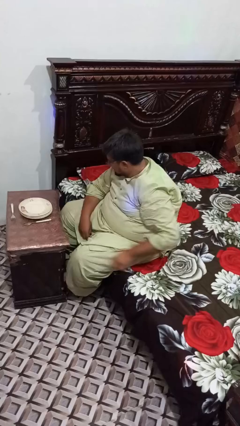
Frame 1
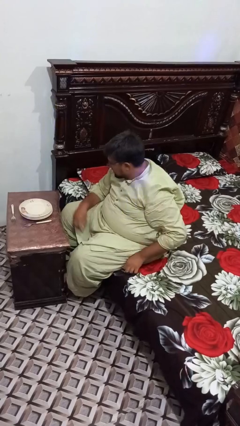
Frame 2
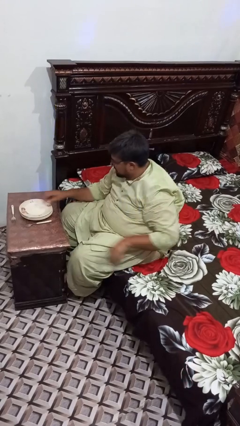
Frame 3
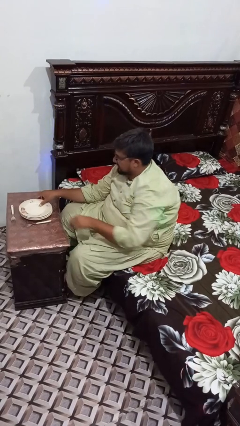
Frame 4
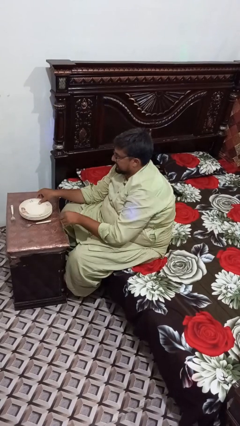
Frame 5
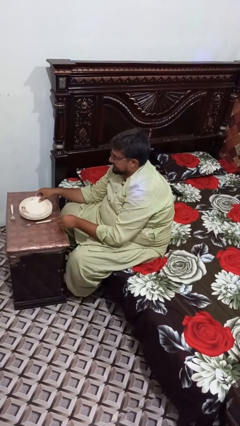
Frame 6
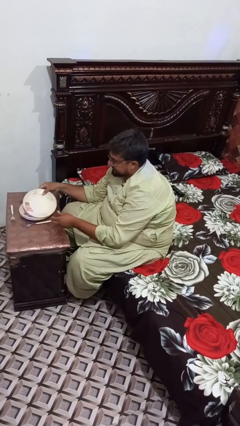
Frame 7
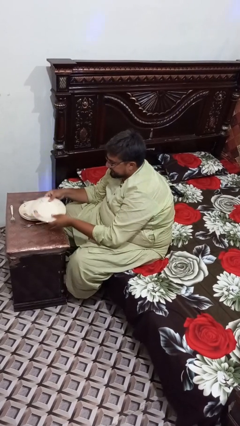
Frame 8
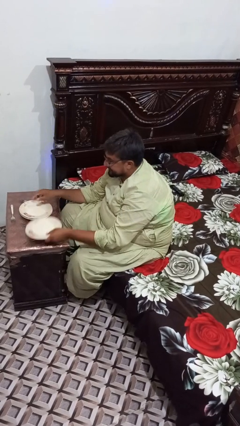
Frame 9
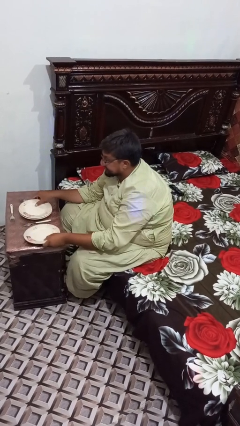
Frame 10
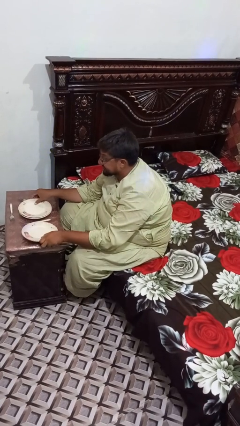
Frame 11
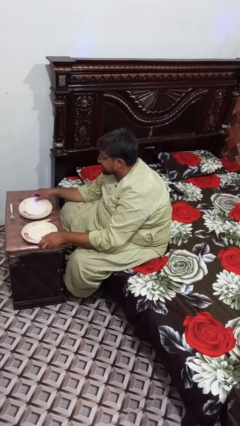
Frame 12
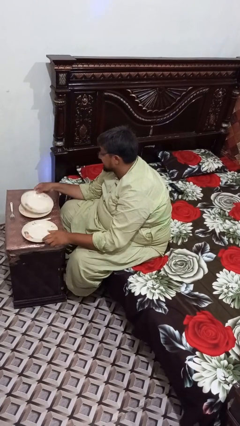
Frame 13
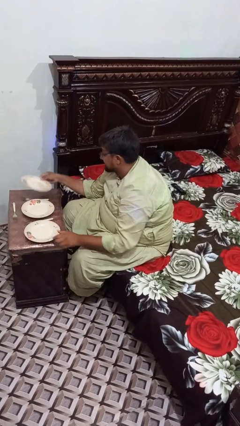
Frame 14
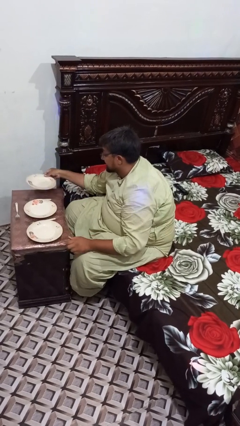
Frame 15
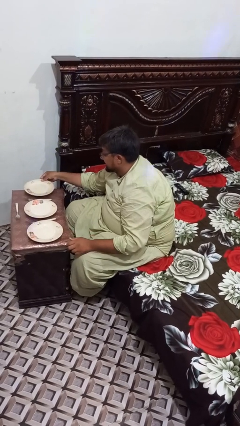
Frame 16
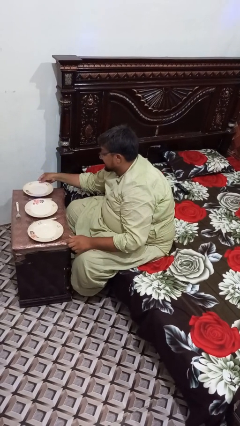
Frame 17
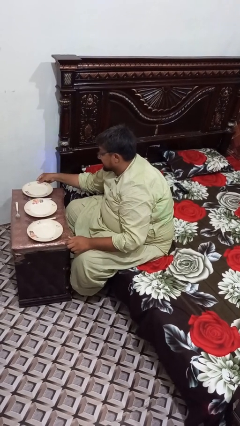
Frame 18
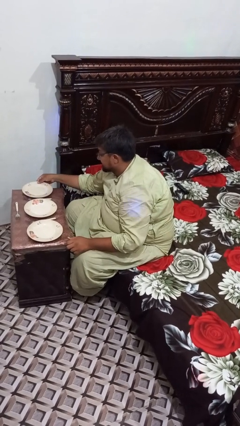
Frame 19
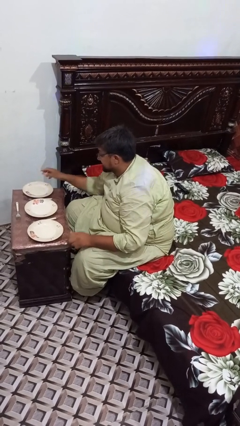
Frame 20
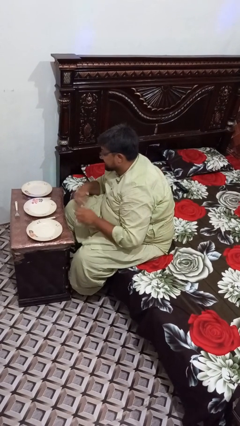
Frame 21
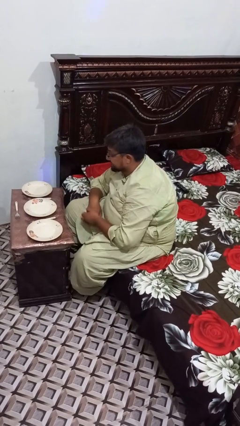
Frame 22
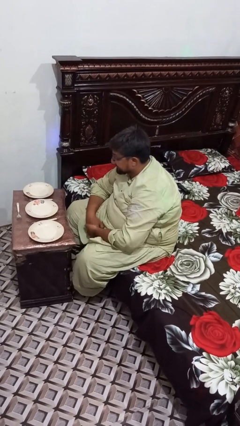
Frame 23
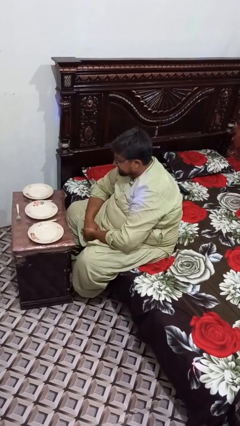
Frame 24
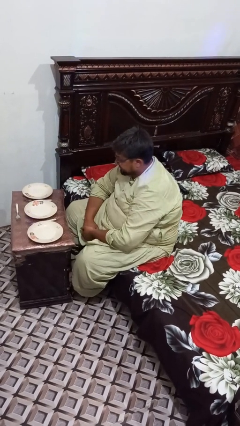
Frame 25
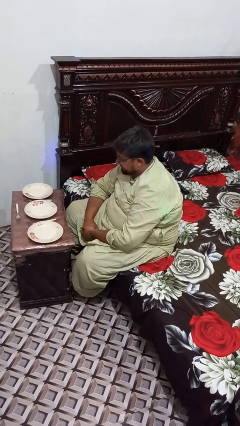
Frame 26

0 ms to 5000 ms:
person sets table

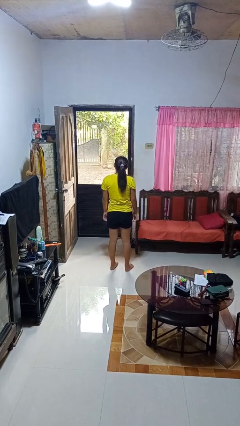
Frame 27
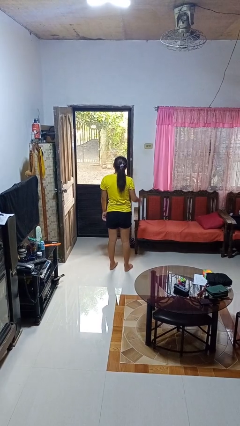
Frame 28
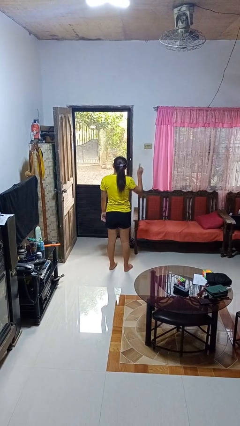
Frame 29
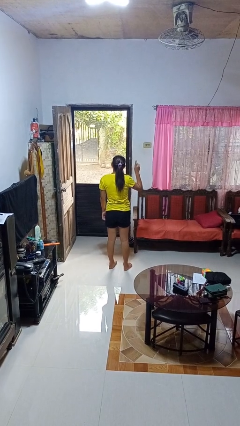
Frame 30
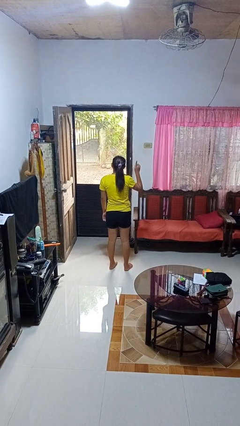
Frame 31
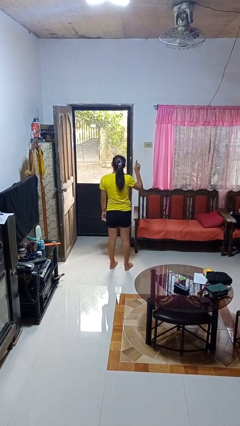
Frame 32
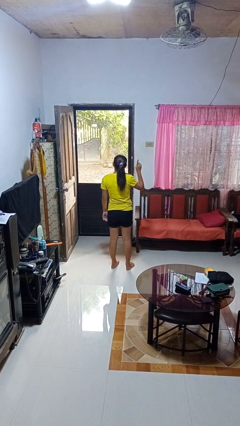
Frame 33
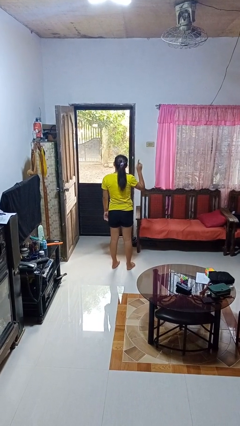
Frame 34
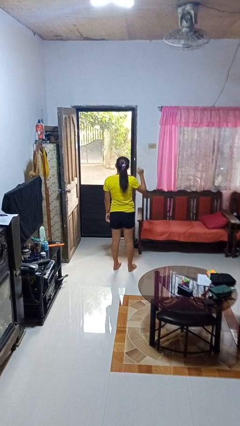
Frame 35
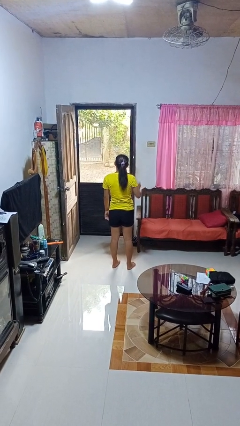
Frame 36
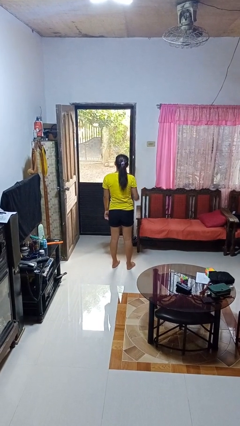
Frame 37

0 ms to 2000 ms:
person gestures number one

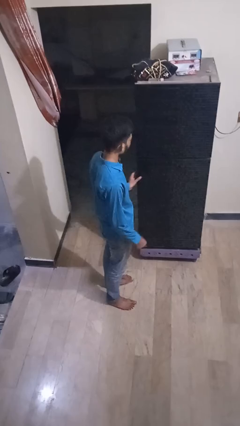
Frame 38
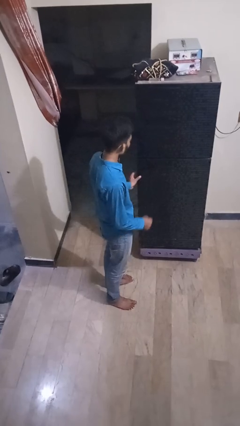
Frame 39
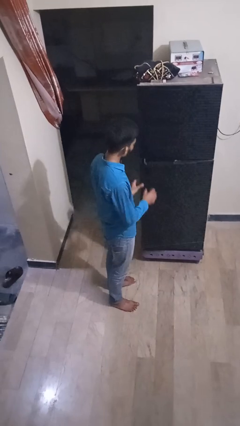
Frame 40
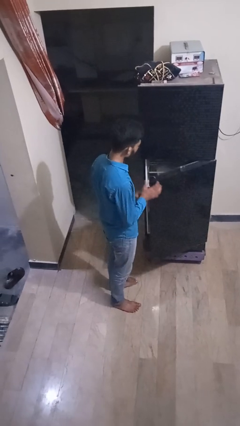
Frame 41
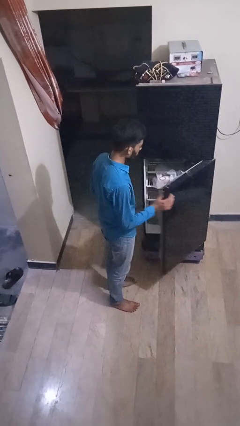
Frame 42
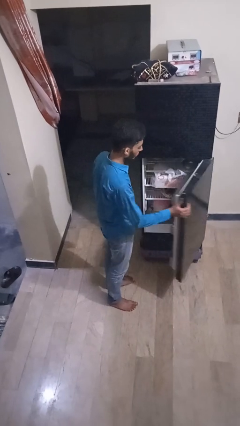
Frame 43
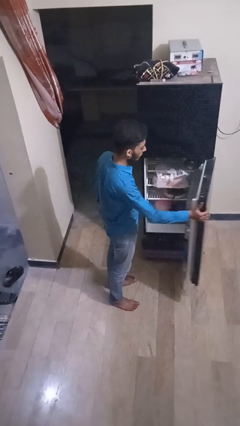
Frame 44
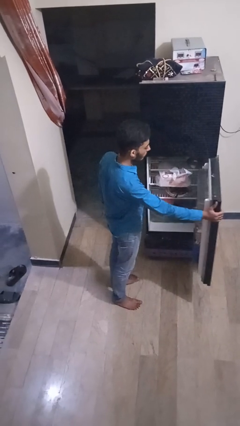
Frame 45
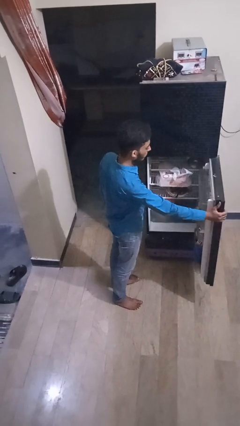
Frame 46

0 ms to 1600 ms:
person opens refrigerator

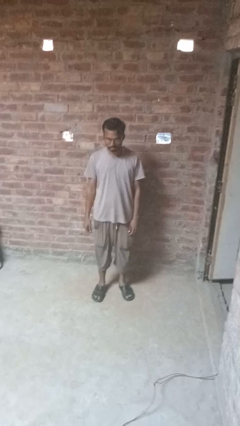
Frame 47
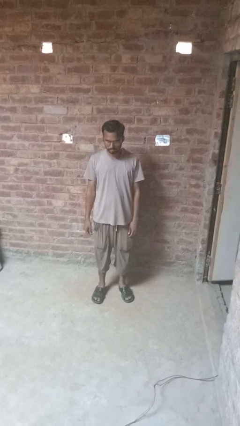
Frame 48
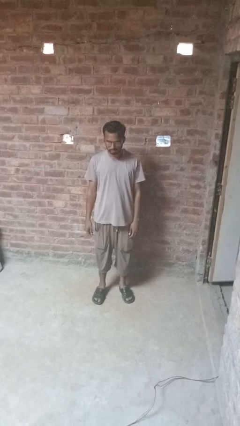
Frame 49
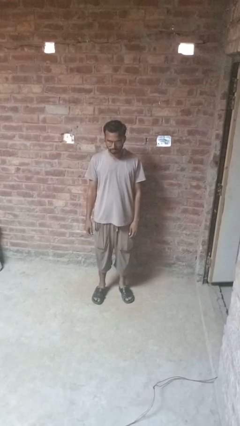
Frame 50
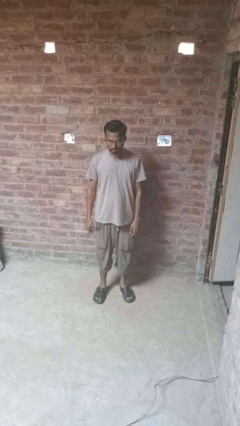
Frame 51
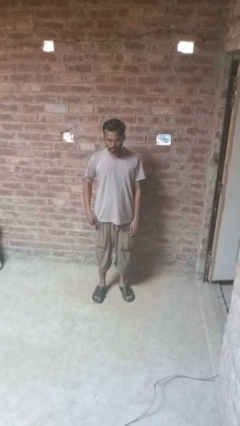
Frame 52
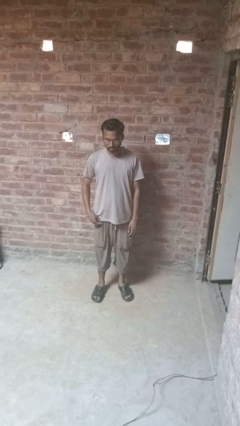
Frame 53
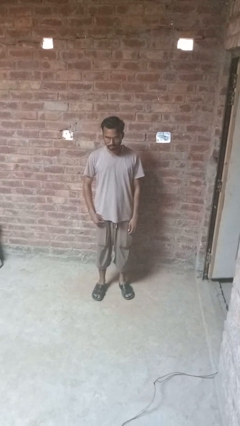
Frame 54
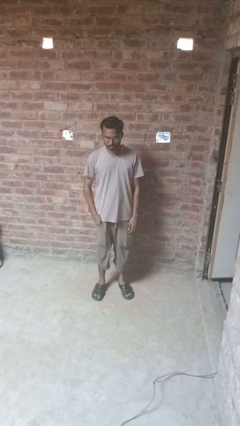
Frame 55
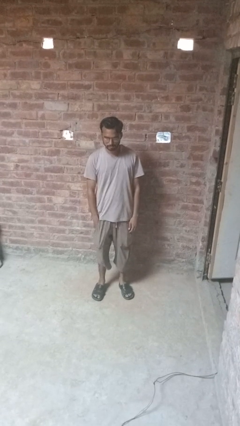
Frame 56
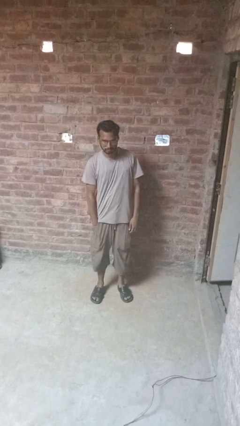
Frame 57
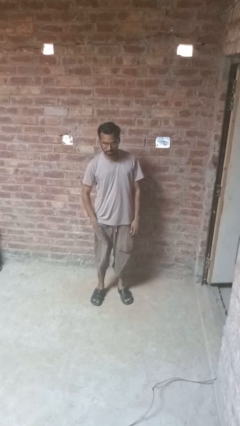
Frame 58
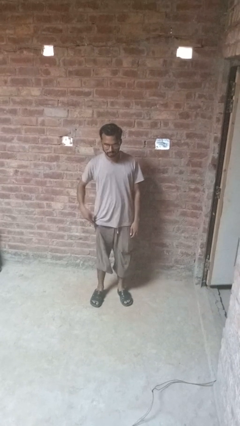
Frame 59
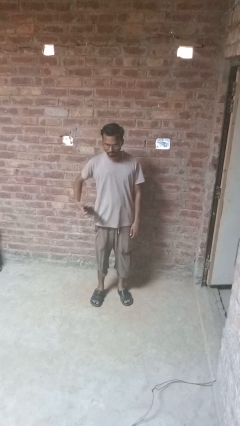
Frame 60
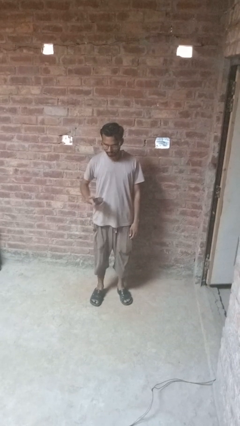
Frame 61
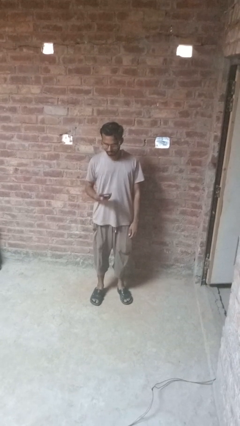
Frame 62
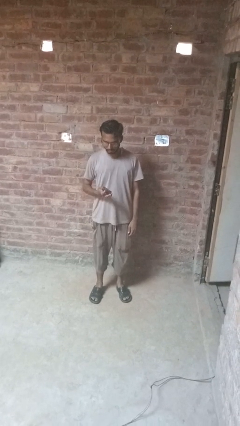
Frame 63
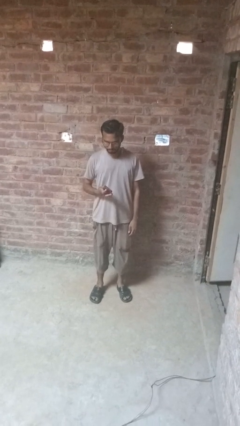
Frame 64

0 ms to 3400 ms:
person takes phone from pocket

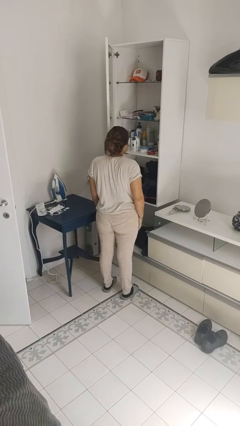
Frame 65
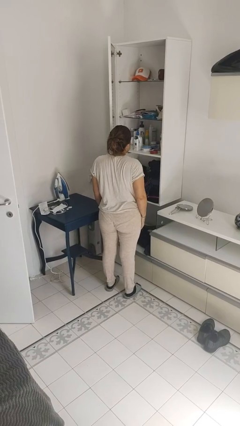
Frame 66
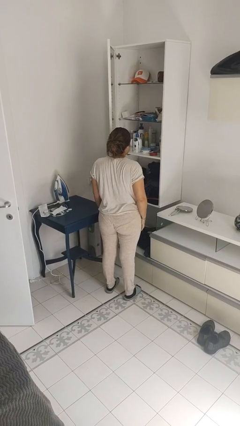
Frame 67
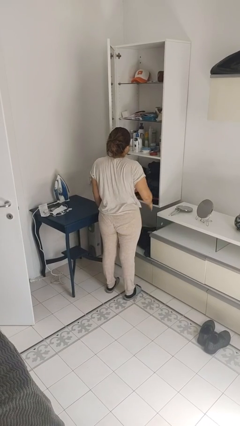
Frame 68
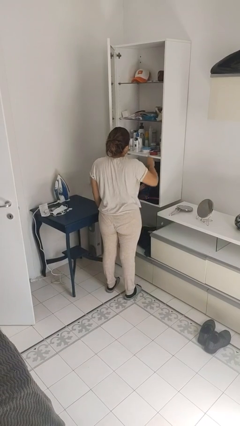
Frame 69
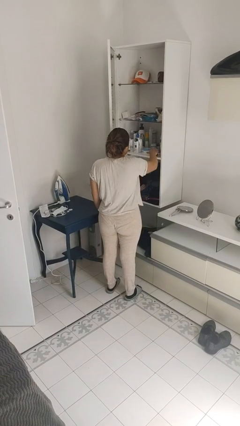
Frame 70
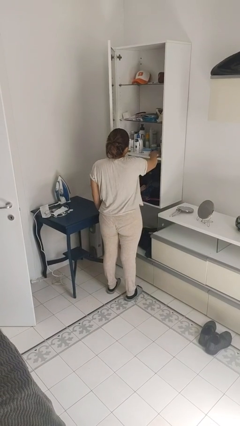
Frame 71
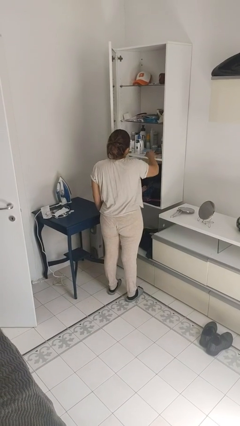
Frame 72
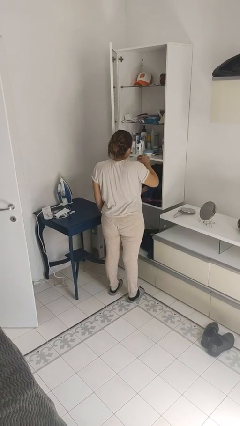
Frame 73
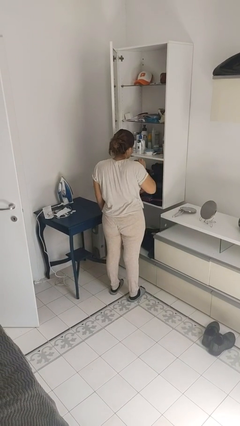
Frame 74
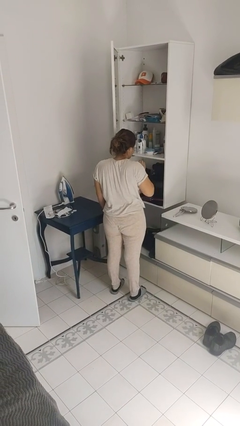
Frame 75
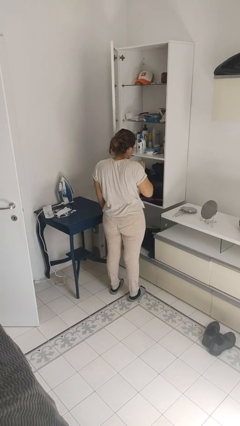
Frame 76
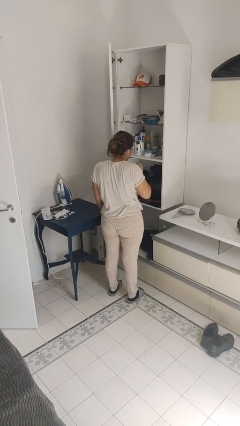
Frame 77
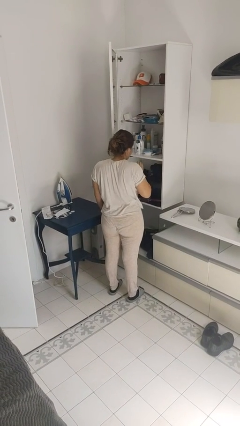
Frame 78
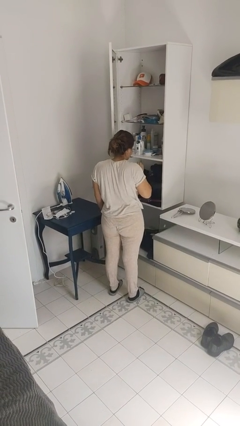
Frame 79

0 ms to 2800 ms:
person picks up object from shelf

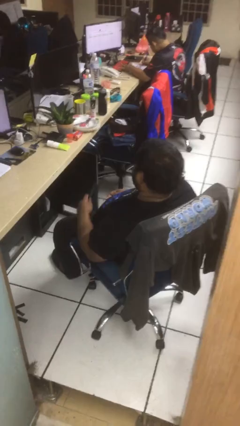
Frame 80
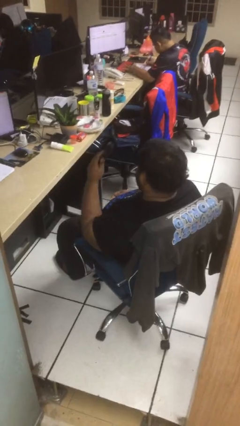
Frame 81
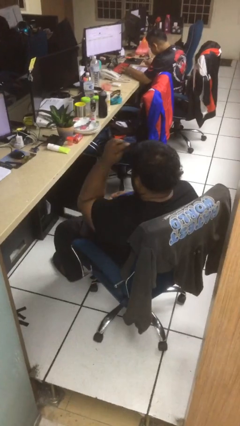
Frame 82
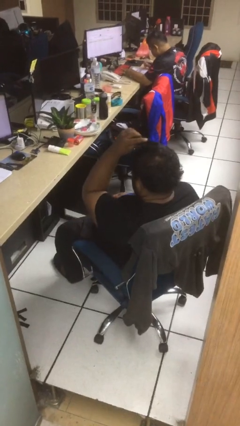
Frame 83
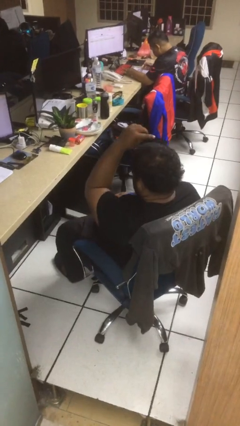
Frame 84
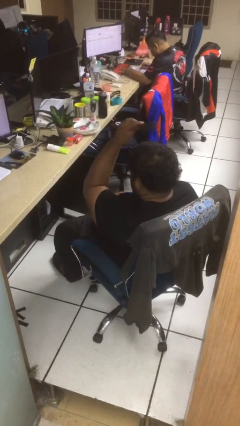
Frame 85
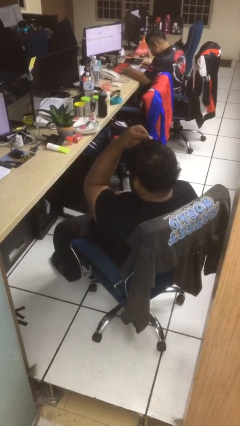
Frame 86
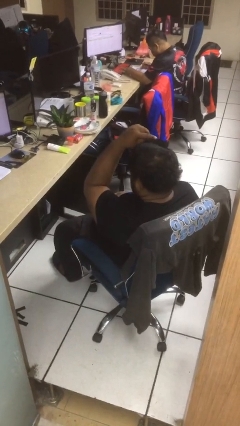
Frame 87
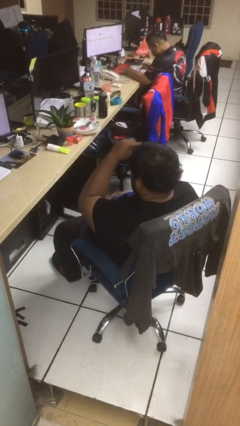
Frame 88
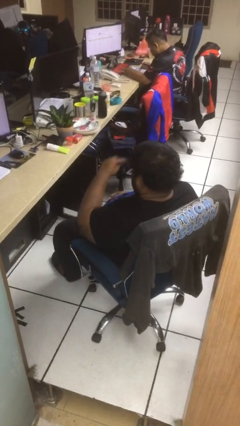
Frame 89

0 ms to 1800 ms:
person brushes hair

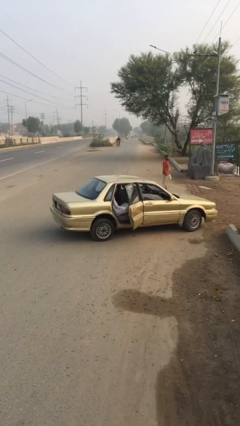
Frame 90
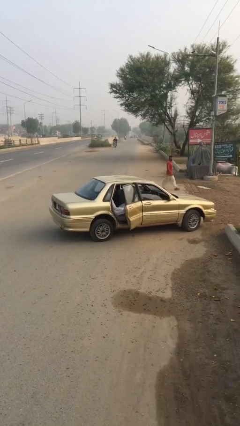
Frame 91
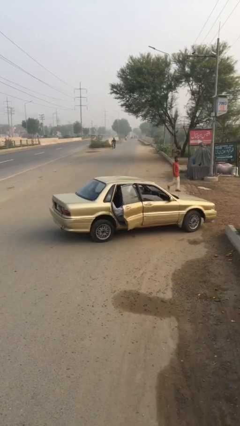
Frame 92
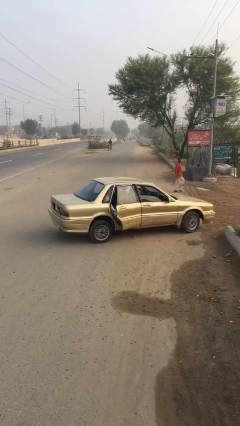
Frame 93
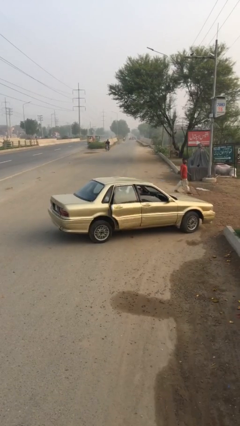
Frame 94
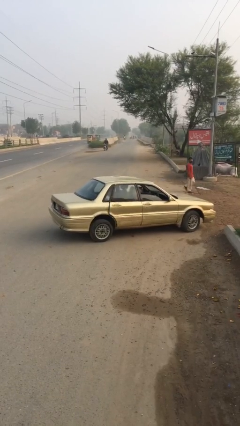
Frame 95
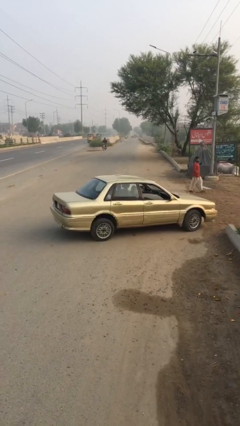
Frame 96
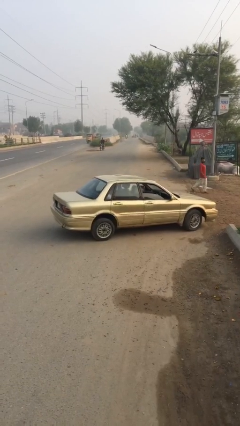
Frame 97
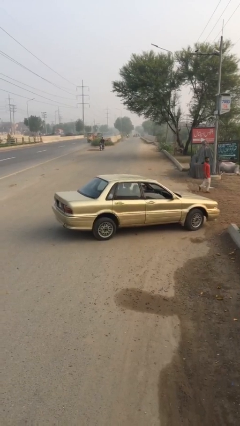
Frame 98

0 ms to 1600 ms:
person closes car door
